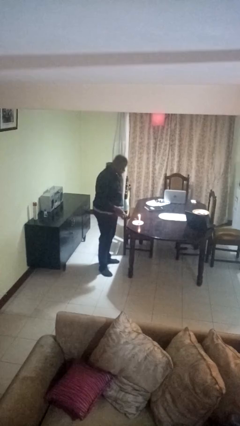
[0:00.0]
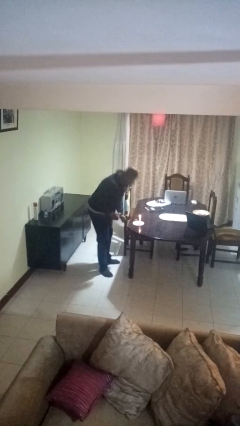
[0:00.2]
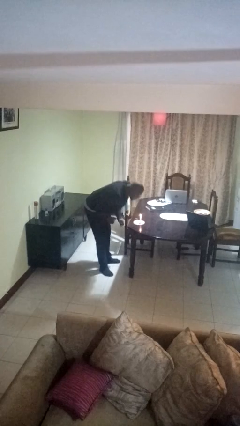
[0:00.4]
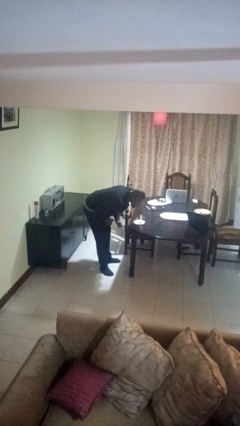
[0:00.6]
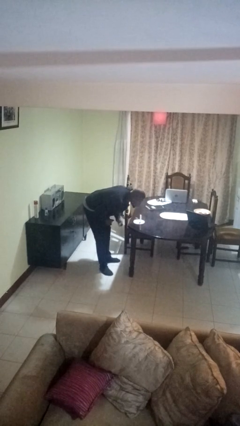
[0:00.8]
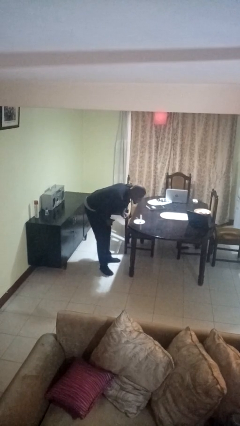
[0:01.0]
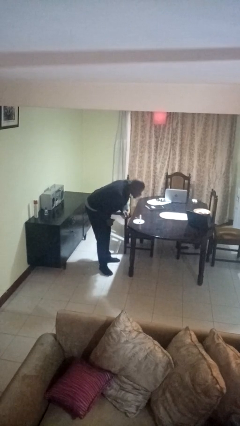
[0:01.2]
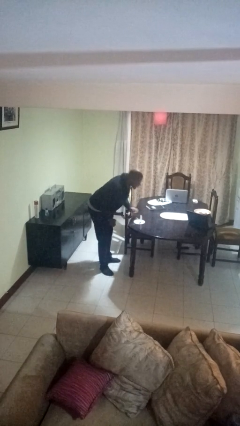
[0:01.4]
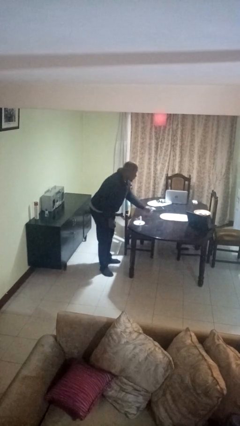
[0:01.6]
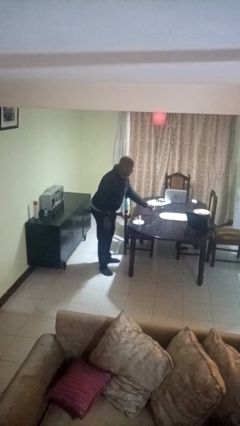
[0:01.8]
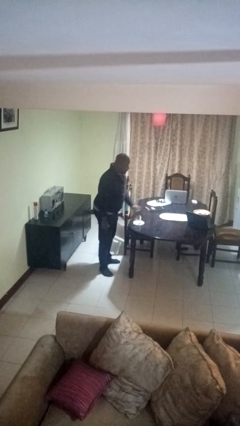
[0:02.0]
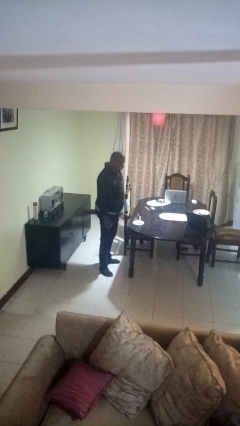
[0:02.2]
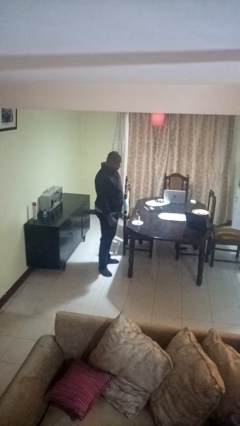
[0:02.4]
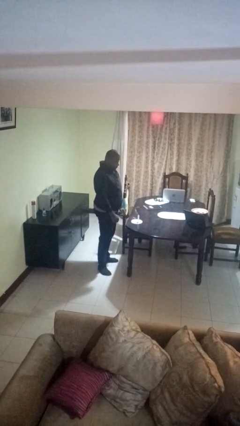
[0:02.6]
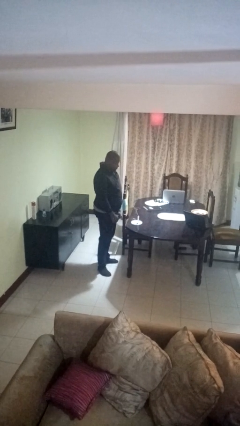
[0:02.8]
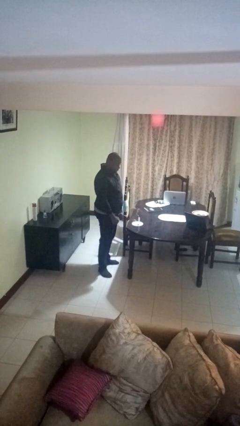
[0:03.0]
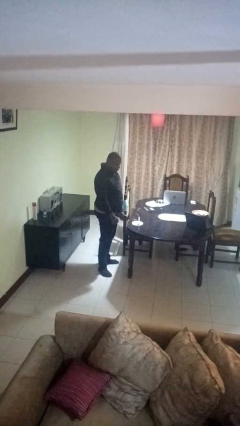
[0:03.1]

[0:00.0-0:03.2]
person extinguishes candle

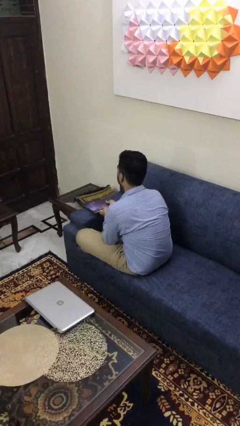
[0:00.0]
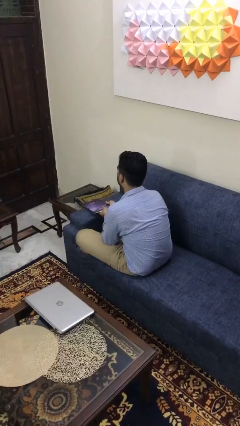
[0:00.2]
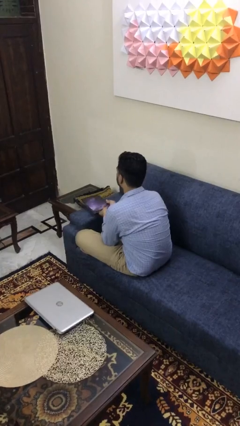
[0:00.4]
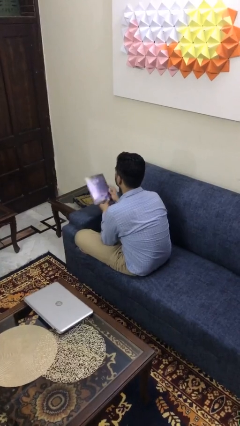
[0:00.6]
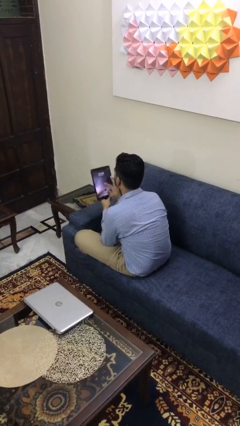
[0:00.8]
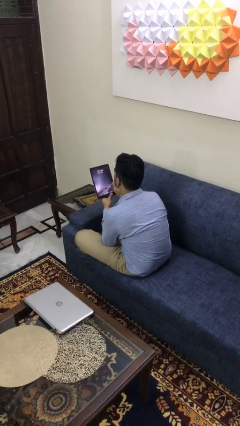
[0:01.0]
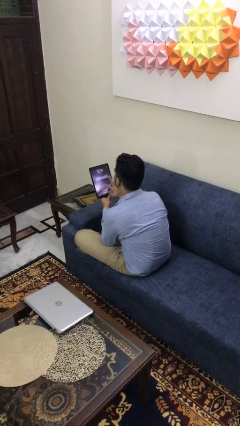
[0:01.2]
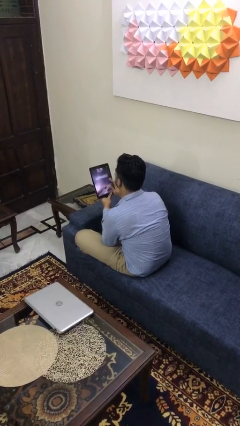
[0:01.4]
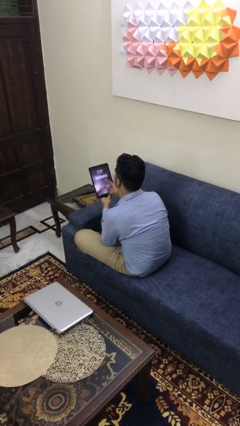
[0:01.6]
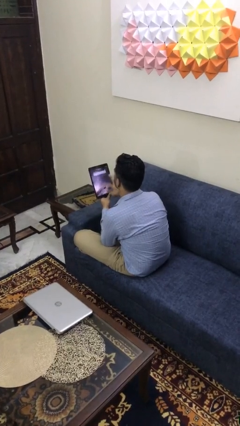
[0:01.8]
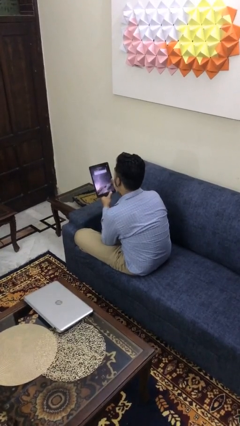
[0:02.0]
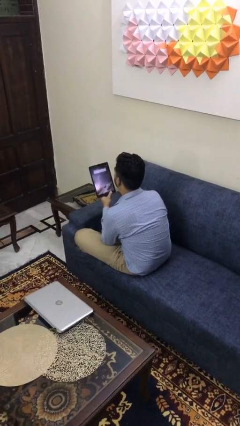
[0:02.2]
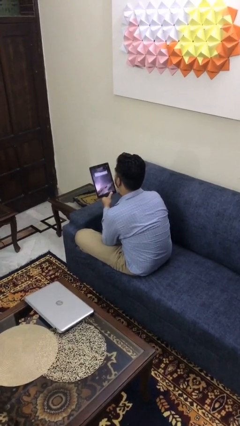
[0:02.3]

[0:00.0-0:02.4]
person interacts with tablet

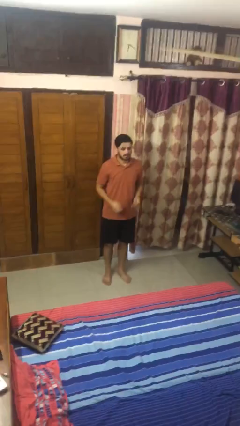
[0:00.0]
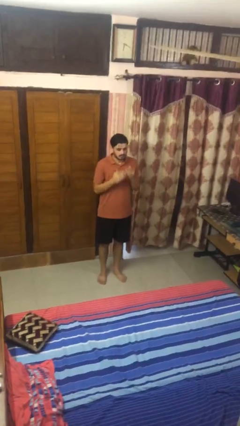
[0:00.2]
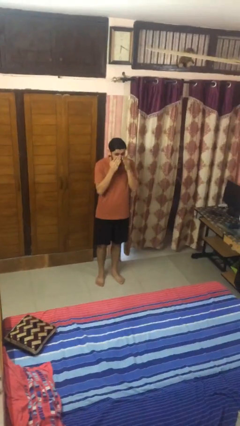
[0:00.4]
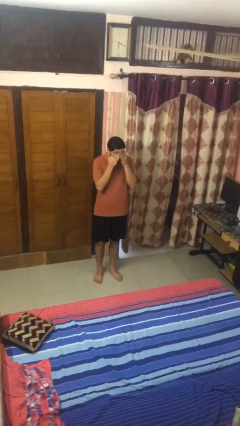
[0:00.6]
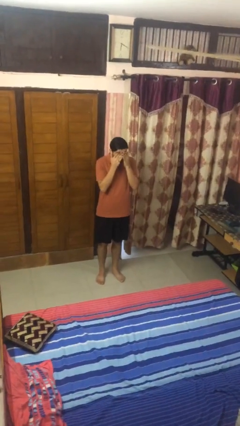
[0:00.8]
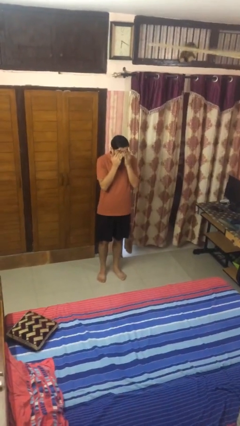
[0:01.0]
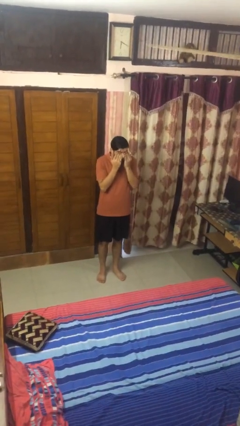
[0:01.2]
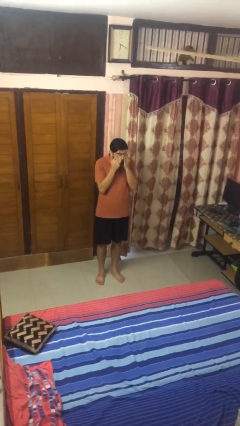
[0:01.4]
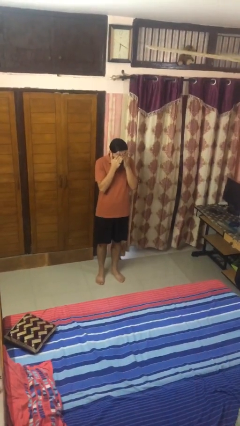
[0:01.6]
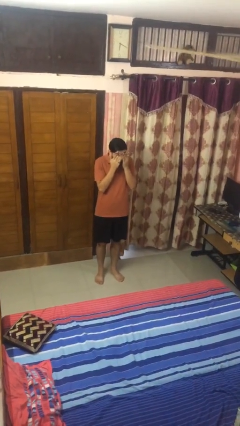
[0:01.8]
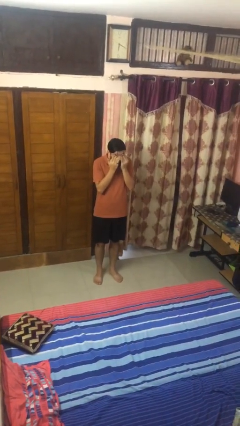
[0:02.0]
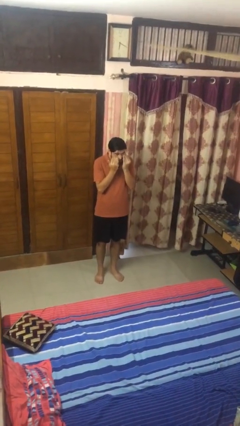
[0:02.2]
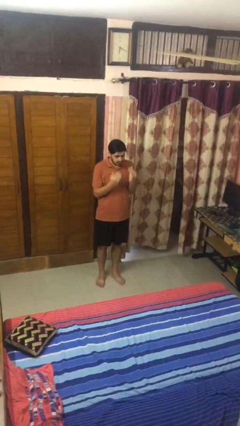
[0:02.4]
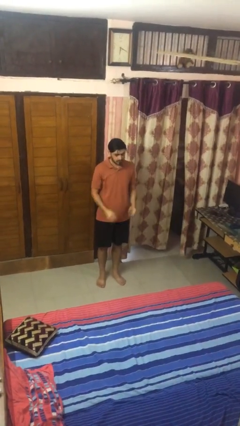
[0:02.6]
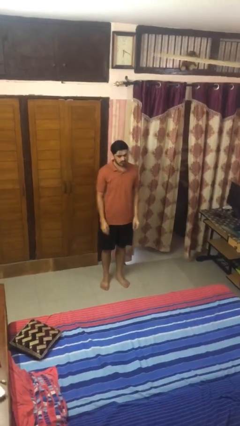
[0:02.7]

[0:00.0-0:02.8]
person rubs eyes

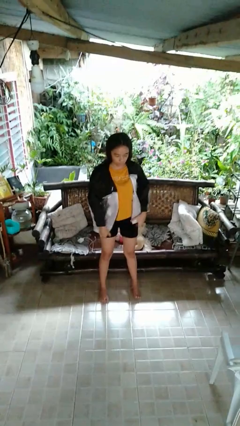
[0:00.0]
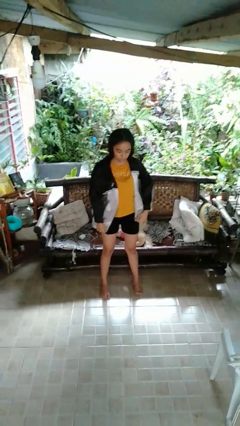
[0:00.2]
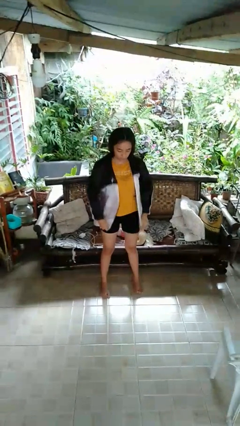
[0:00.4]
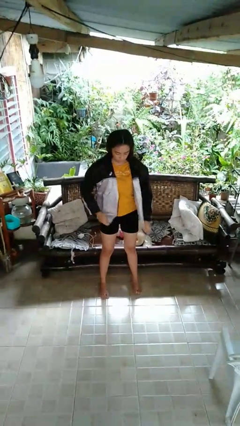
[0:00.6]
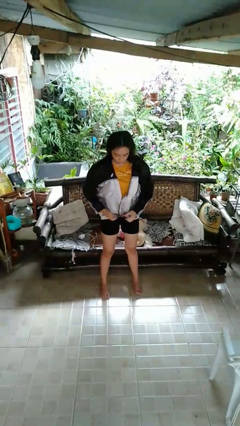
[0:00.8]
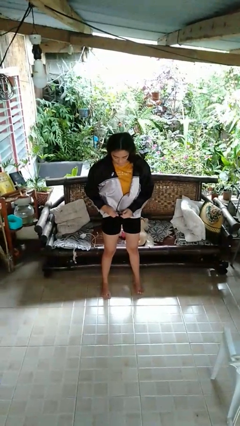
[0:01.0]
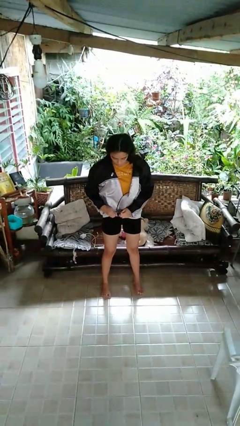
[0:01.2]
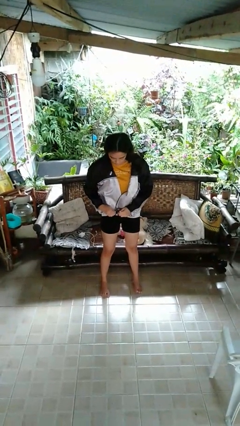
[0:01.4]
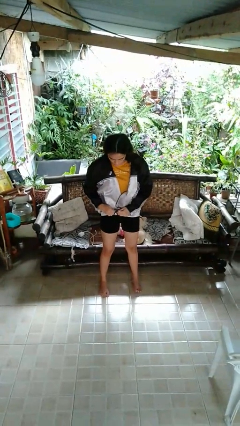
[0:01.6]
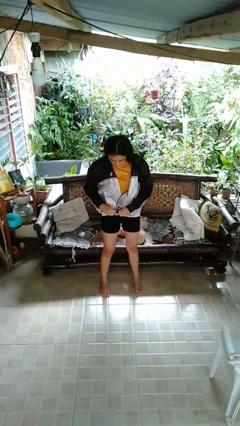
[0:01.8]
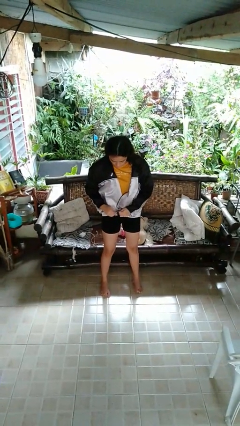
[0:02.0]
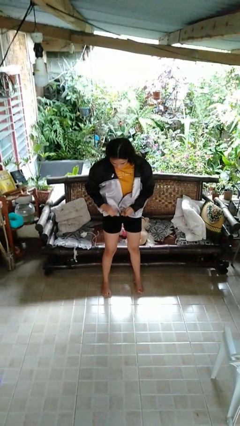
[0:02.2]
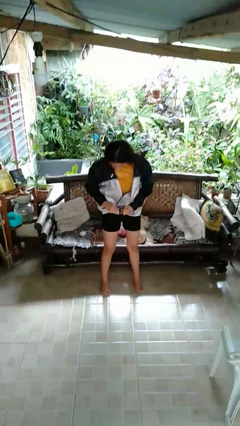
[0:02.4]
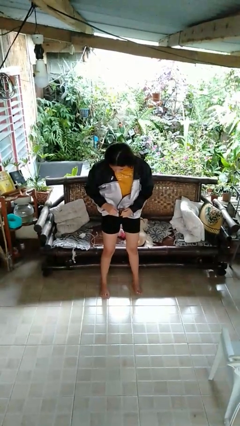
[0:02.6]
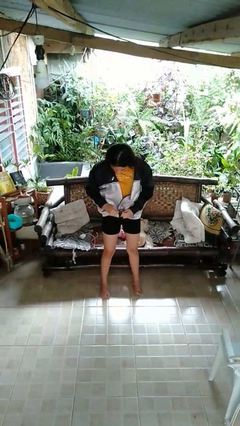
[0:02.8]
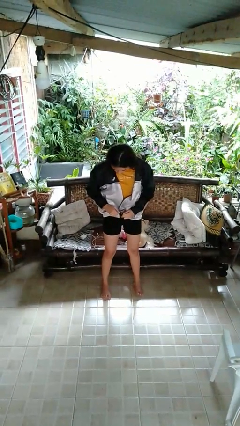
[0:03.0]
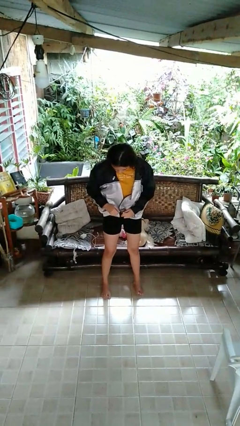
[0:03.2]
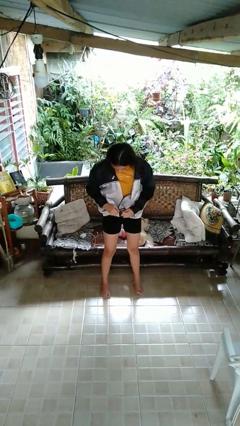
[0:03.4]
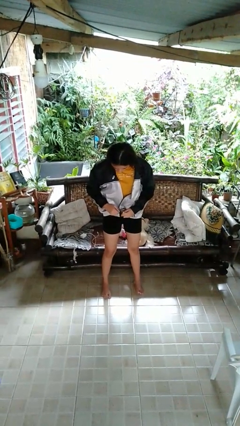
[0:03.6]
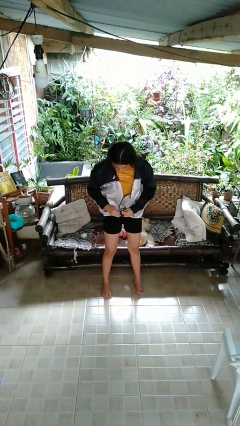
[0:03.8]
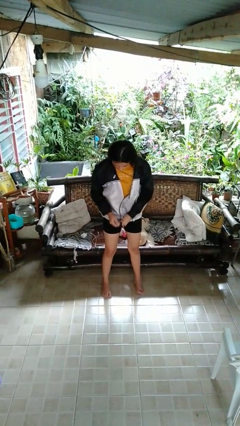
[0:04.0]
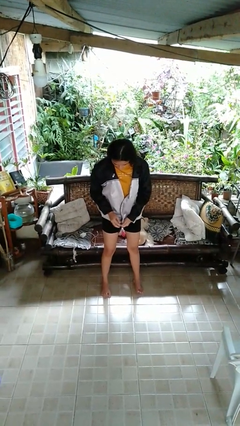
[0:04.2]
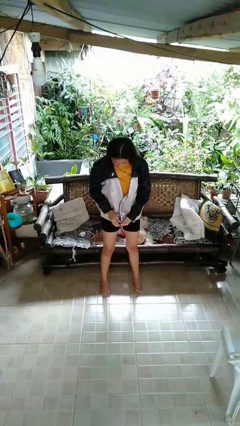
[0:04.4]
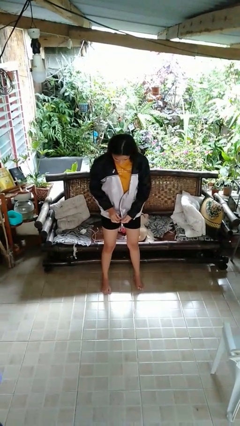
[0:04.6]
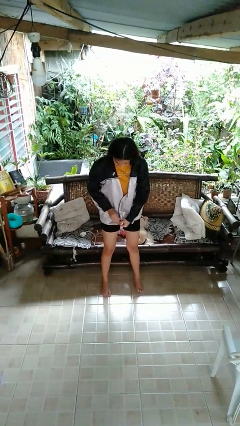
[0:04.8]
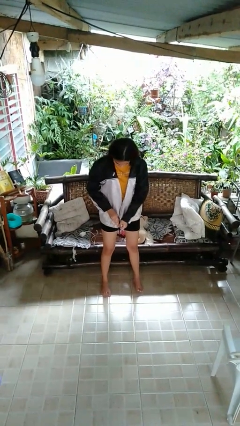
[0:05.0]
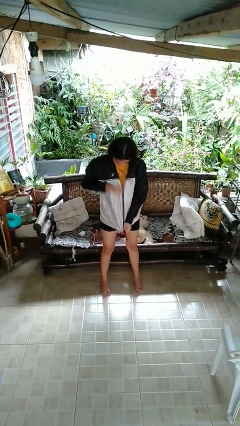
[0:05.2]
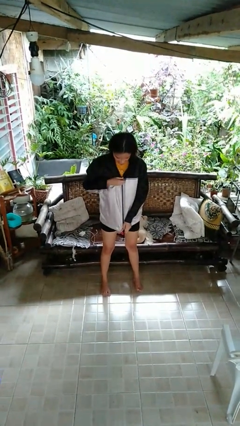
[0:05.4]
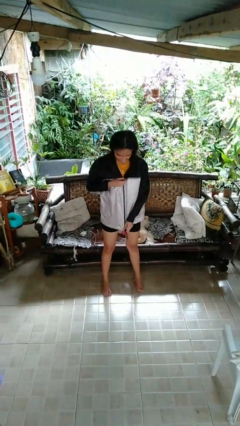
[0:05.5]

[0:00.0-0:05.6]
person zips up jacket

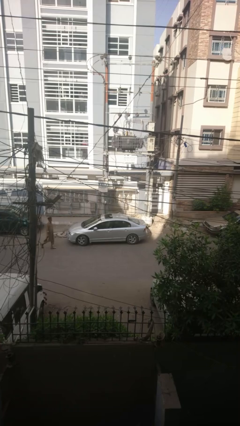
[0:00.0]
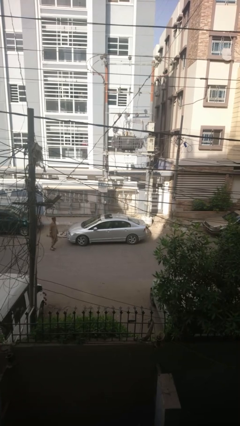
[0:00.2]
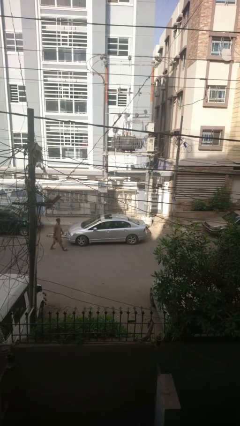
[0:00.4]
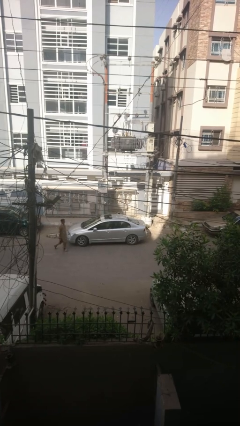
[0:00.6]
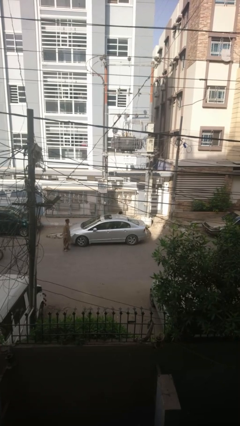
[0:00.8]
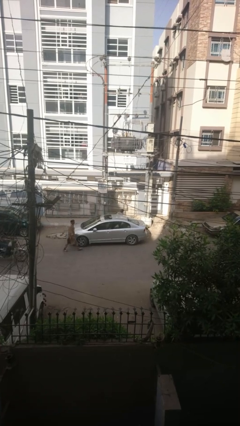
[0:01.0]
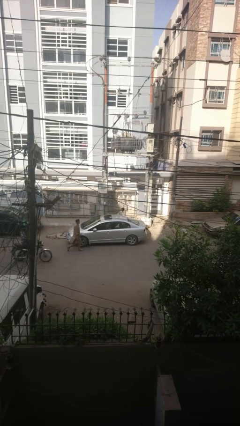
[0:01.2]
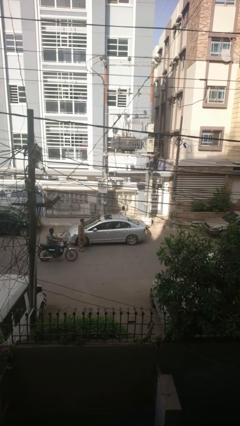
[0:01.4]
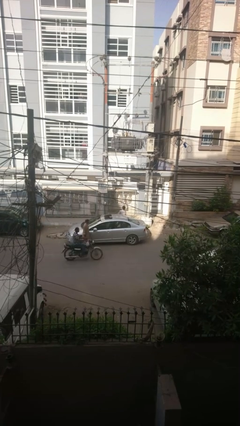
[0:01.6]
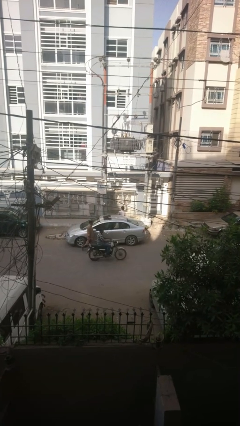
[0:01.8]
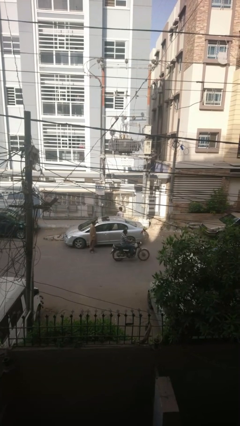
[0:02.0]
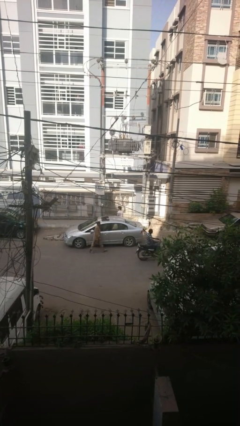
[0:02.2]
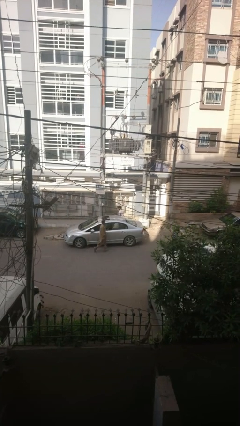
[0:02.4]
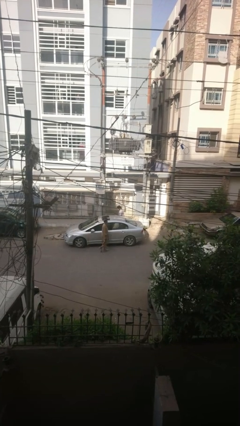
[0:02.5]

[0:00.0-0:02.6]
person exits car

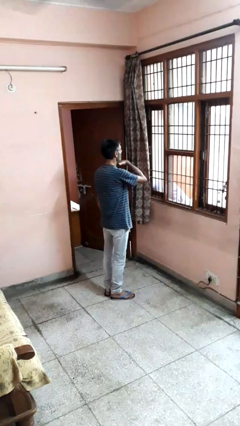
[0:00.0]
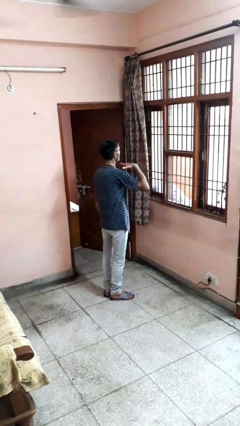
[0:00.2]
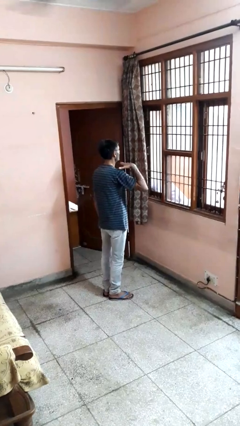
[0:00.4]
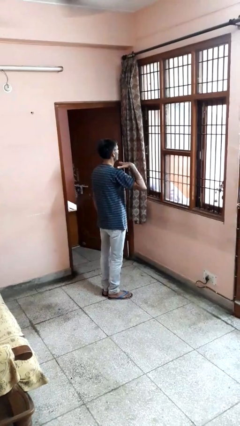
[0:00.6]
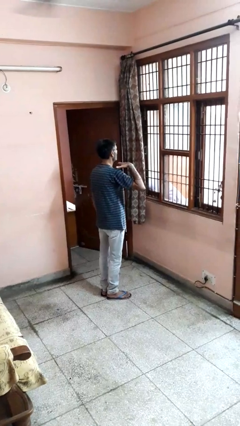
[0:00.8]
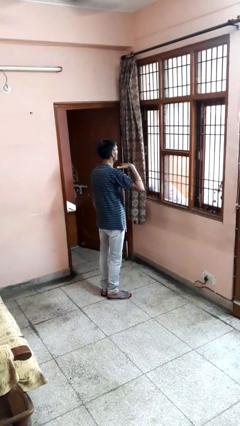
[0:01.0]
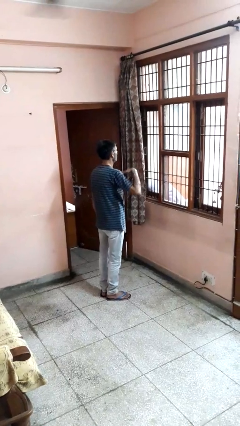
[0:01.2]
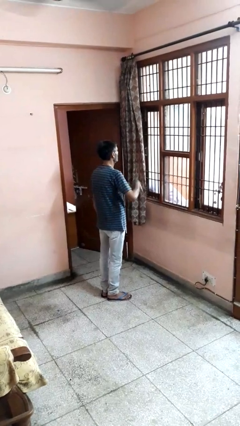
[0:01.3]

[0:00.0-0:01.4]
person gestures cut
